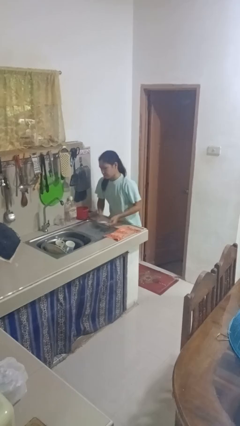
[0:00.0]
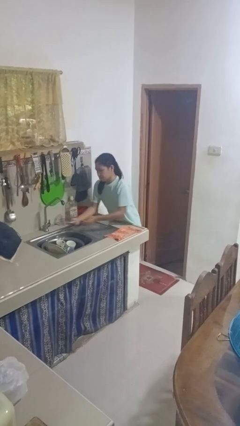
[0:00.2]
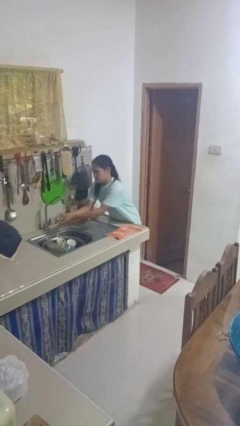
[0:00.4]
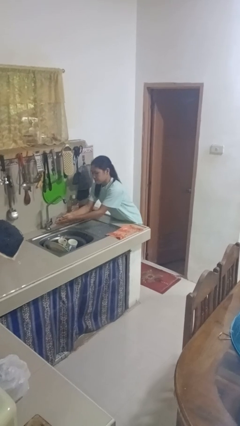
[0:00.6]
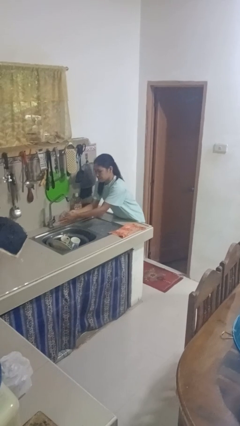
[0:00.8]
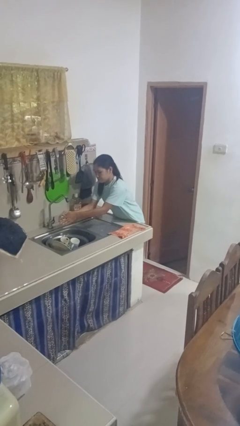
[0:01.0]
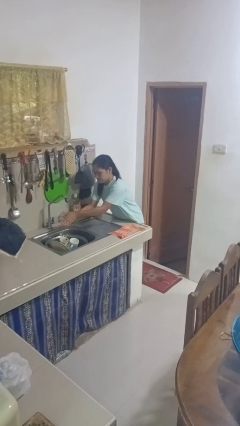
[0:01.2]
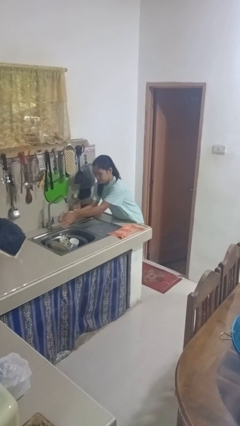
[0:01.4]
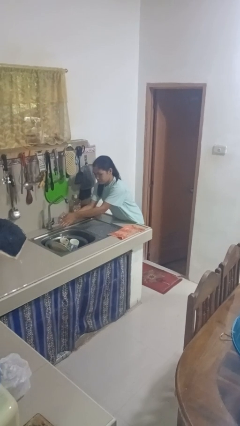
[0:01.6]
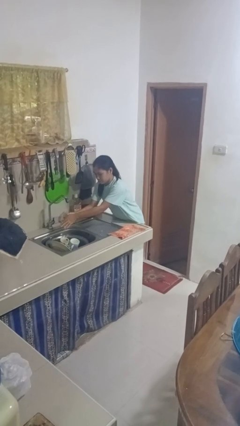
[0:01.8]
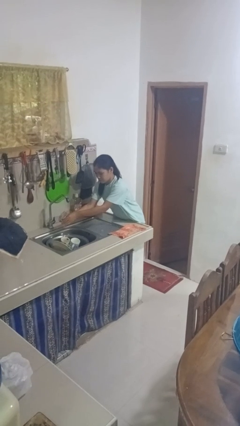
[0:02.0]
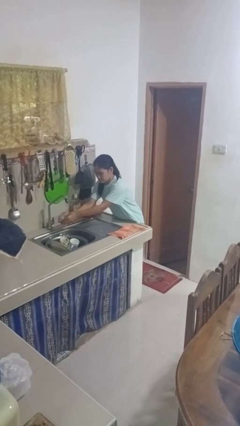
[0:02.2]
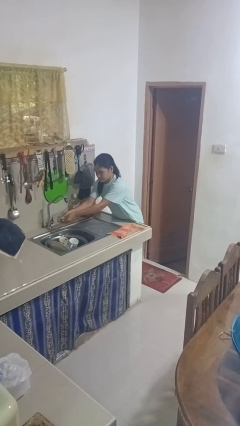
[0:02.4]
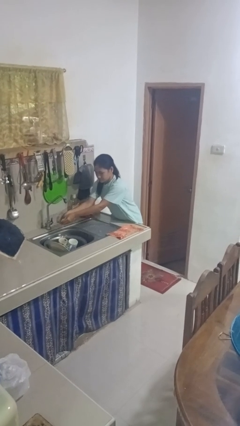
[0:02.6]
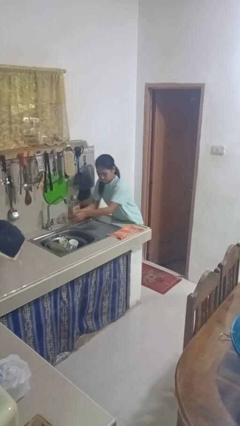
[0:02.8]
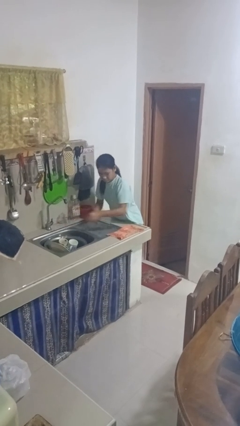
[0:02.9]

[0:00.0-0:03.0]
person washes hands

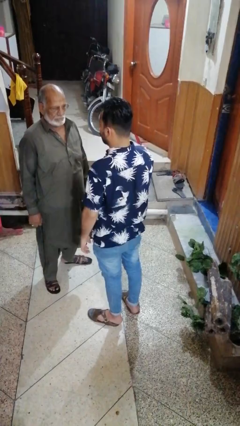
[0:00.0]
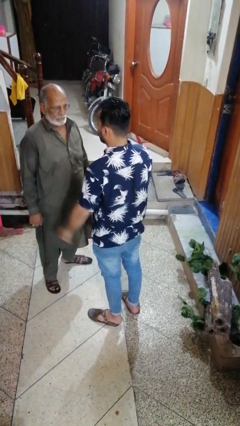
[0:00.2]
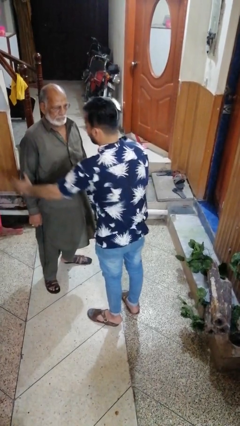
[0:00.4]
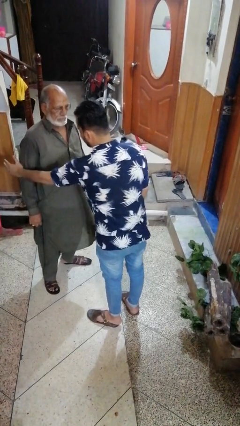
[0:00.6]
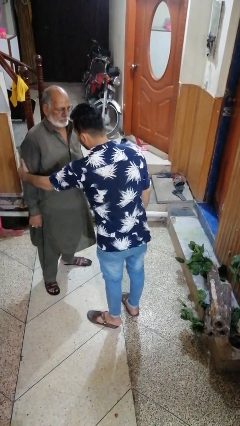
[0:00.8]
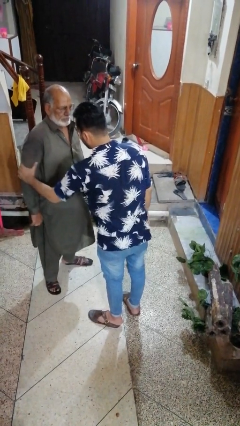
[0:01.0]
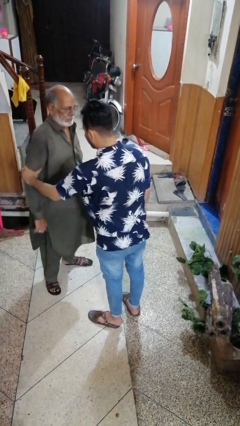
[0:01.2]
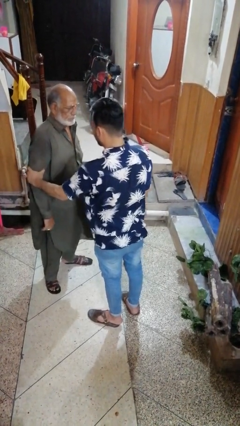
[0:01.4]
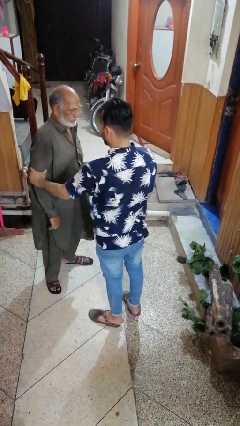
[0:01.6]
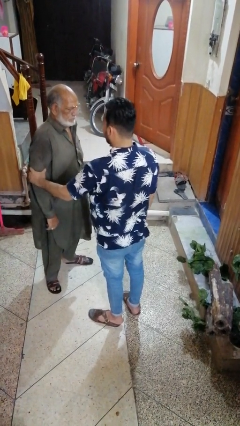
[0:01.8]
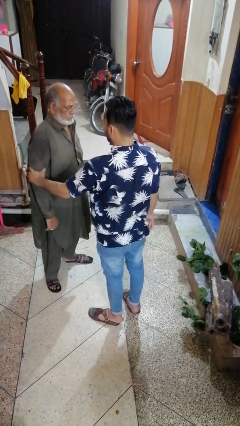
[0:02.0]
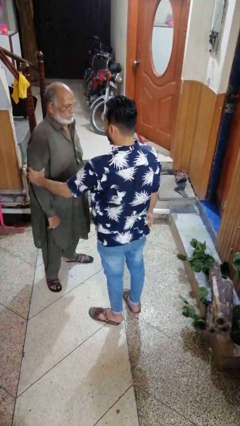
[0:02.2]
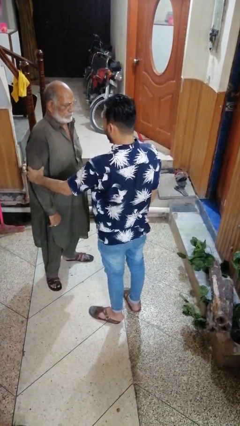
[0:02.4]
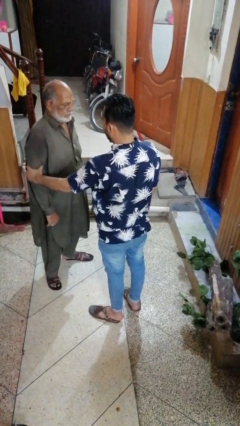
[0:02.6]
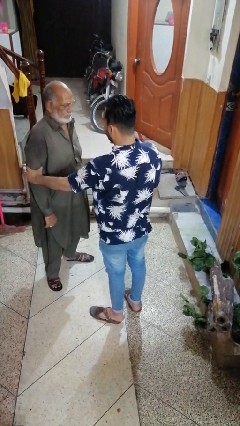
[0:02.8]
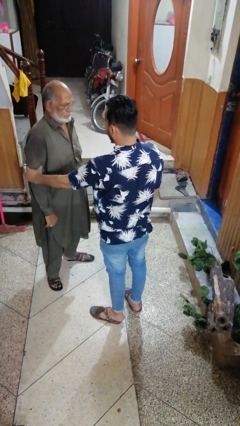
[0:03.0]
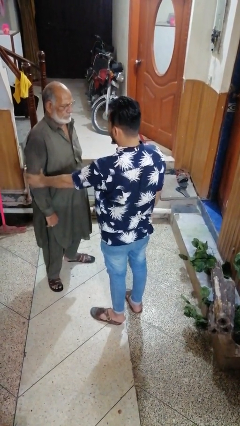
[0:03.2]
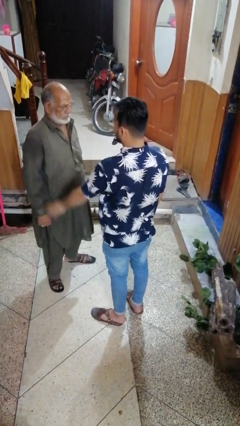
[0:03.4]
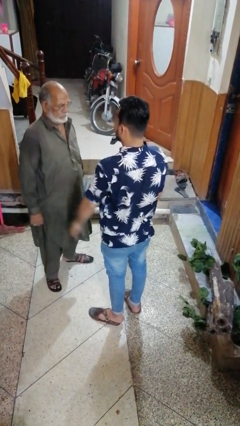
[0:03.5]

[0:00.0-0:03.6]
person grabs person by forearm

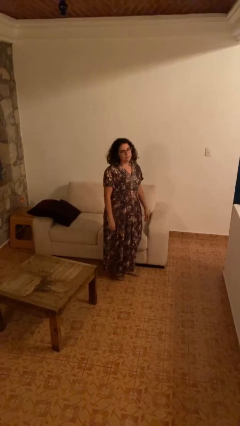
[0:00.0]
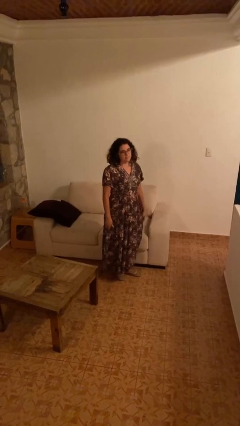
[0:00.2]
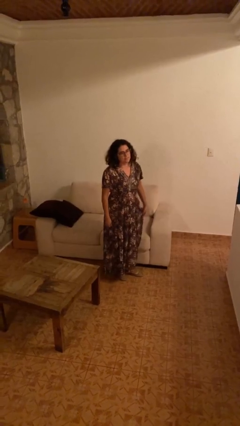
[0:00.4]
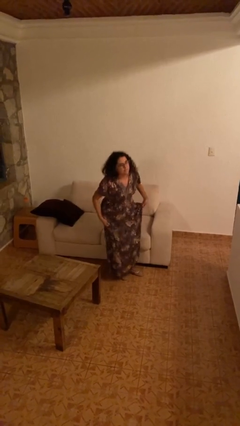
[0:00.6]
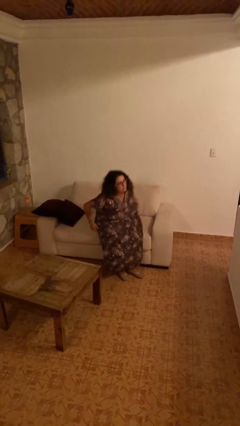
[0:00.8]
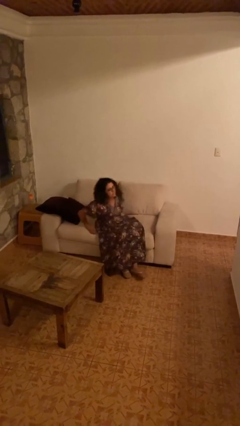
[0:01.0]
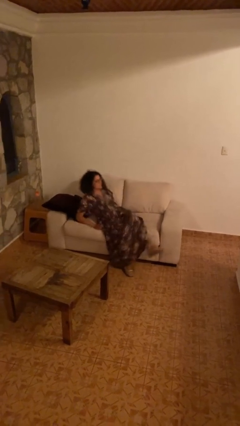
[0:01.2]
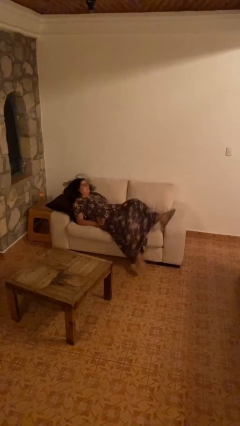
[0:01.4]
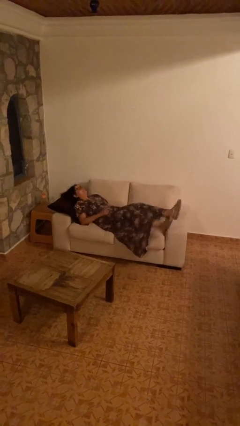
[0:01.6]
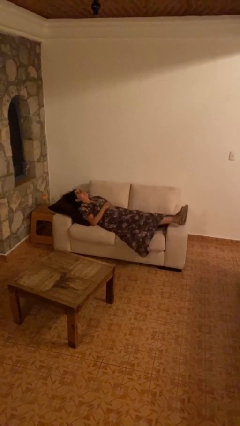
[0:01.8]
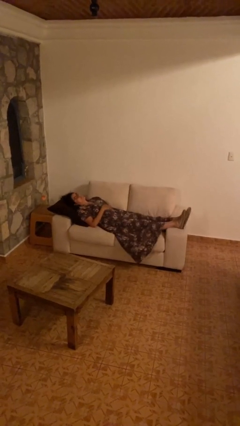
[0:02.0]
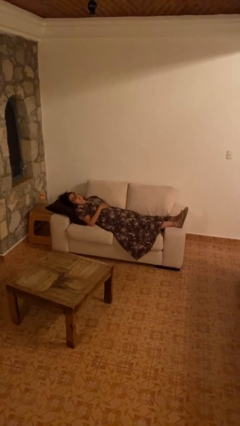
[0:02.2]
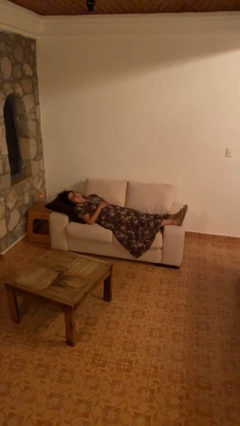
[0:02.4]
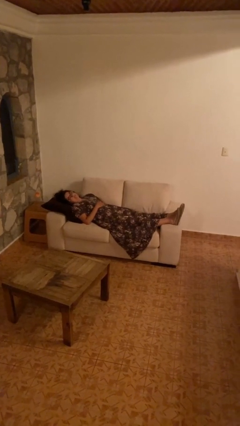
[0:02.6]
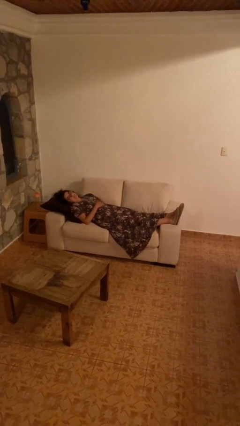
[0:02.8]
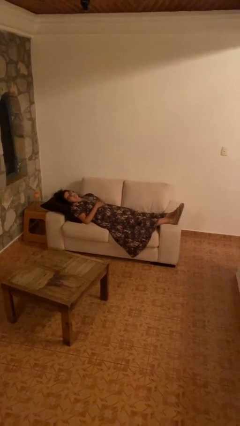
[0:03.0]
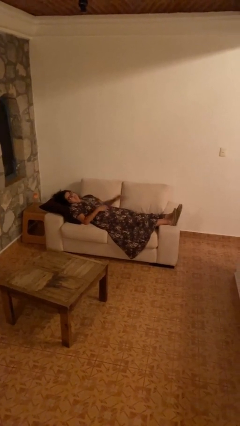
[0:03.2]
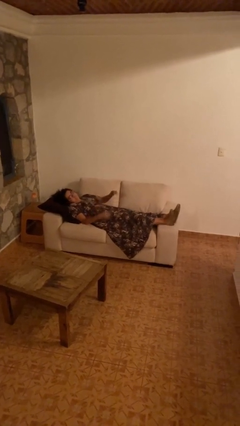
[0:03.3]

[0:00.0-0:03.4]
person lies down on couch

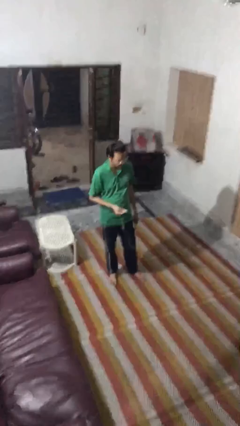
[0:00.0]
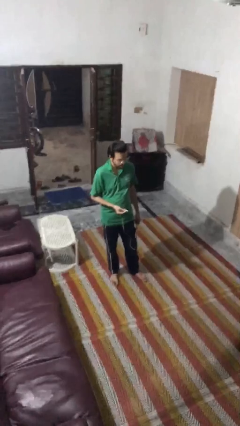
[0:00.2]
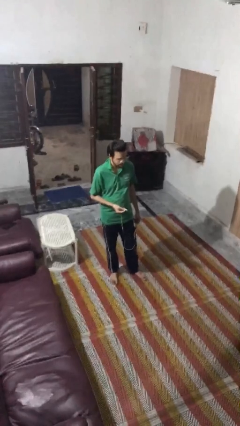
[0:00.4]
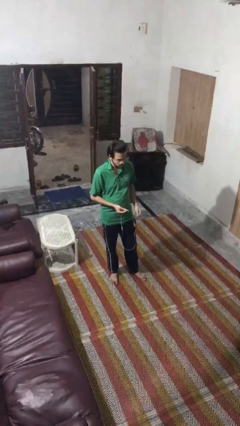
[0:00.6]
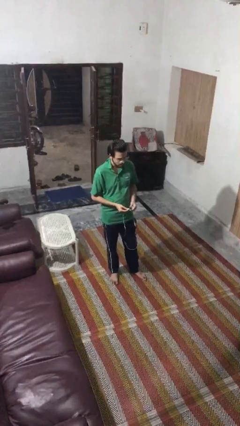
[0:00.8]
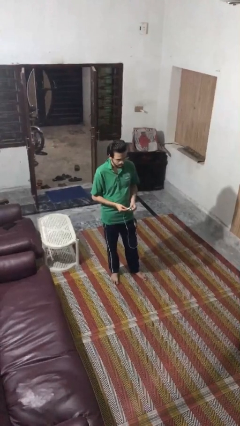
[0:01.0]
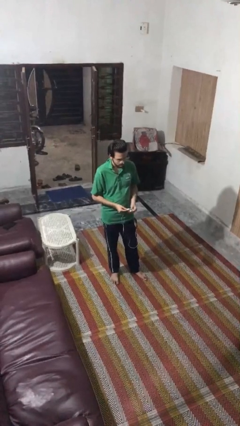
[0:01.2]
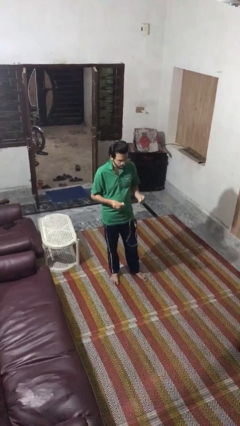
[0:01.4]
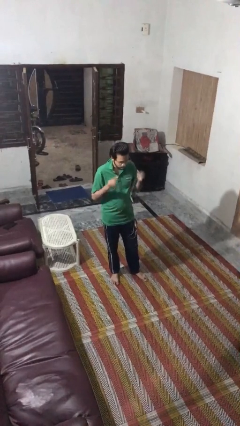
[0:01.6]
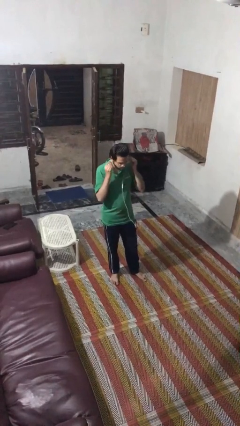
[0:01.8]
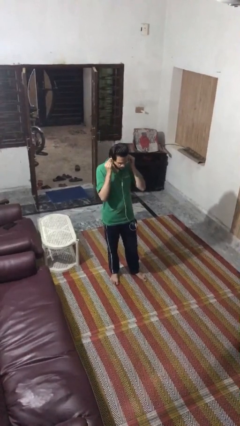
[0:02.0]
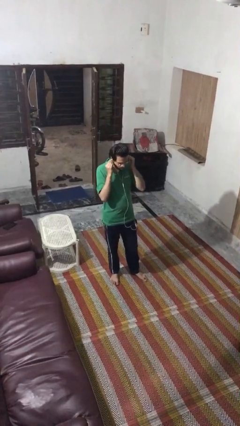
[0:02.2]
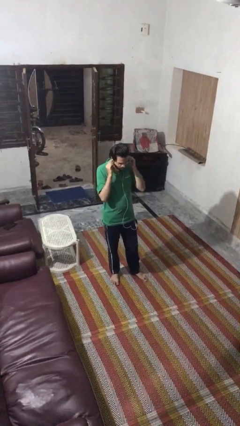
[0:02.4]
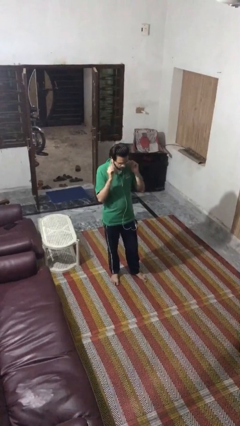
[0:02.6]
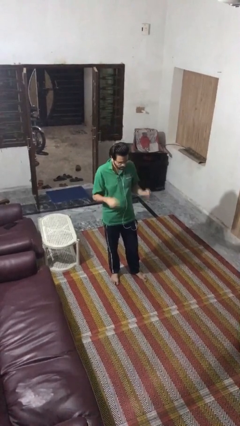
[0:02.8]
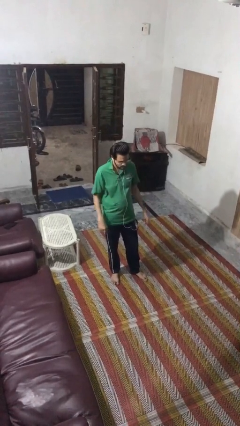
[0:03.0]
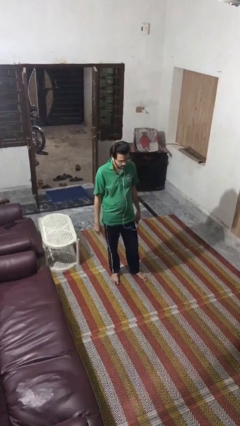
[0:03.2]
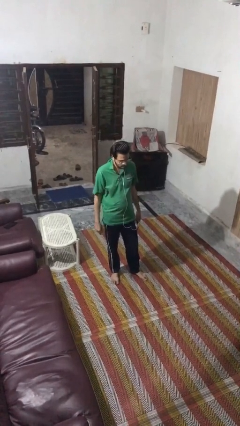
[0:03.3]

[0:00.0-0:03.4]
person puts on headphones

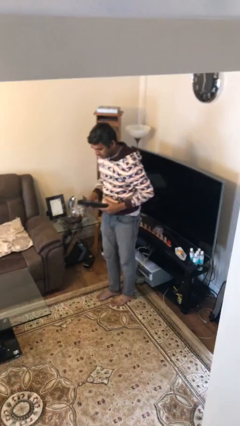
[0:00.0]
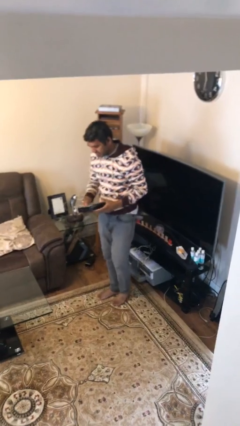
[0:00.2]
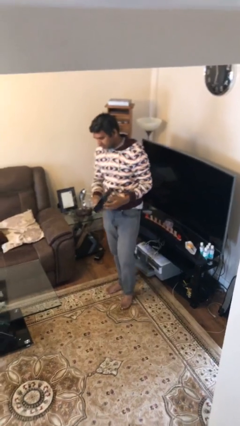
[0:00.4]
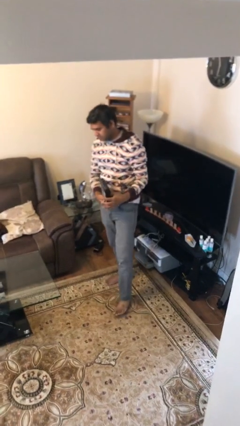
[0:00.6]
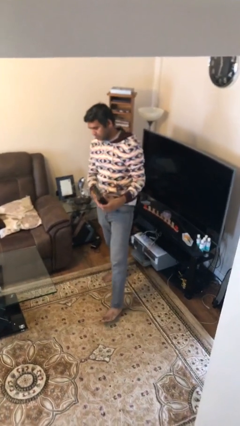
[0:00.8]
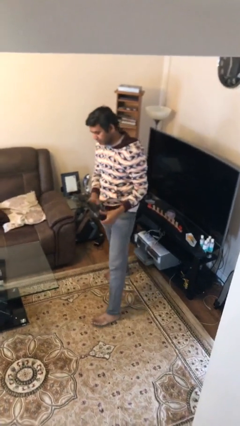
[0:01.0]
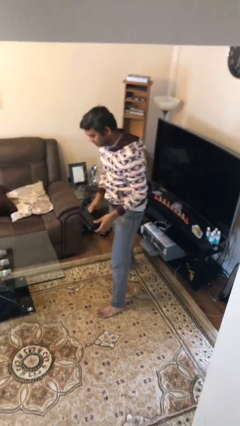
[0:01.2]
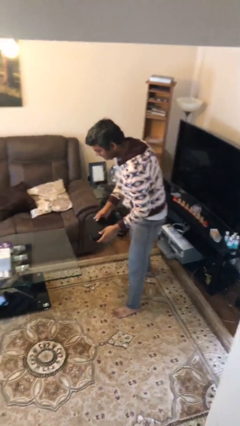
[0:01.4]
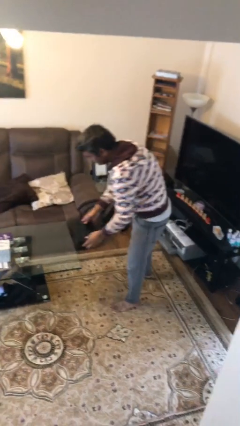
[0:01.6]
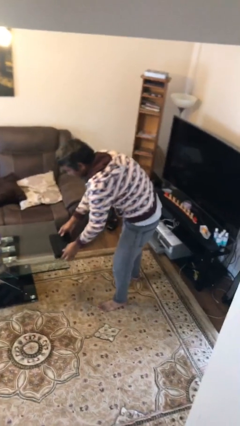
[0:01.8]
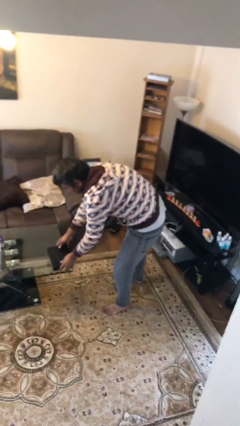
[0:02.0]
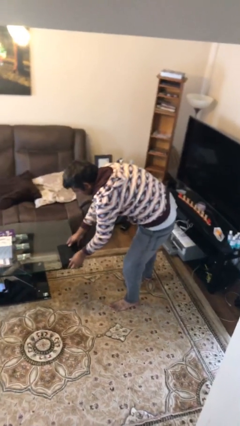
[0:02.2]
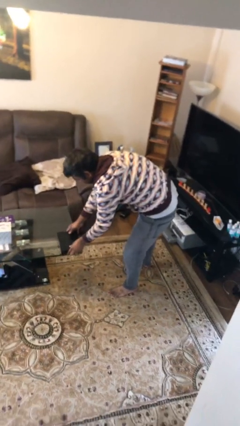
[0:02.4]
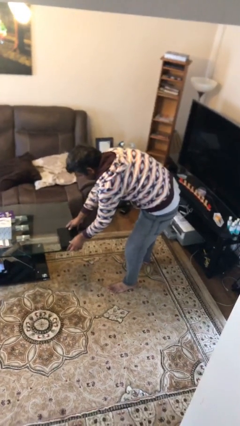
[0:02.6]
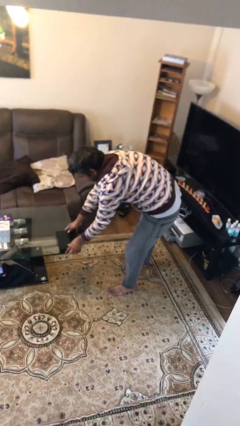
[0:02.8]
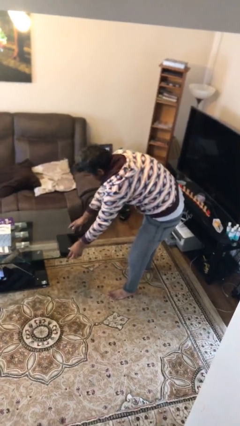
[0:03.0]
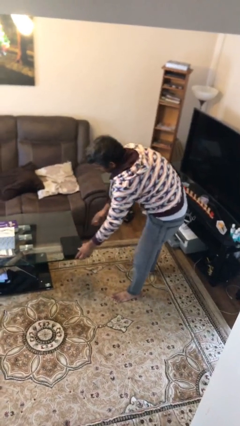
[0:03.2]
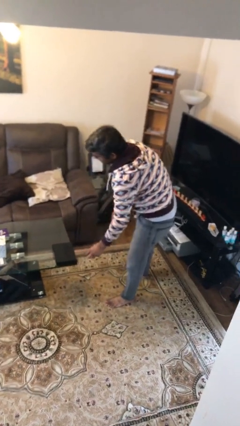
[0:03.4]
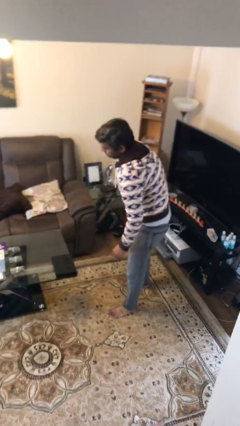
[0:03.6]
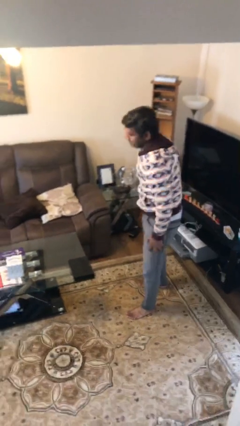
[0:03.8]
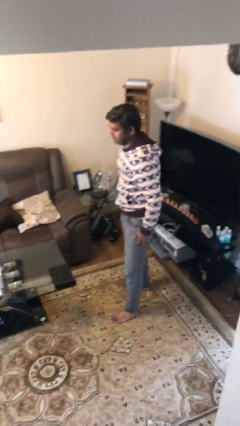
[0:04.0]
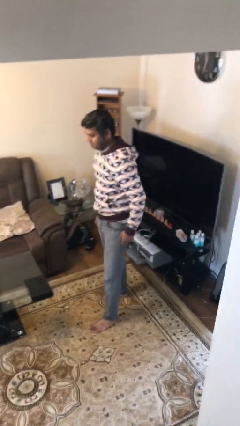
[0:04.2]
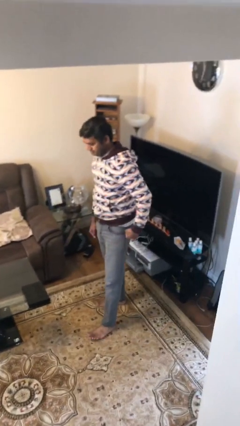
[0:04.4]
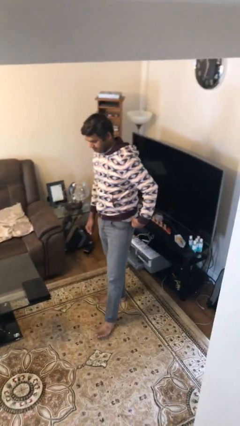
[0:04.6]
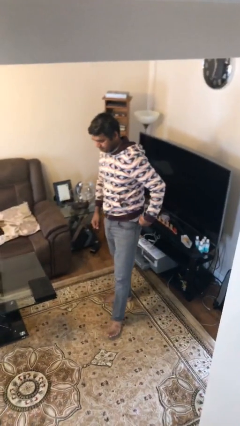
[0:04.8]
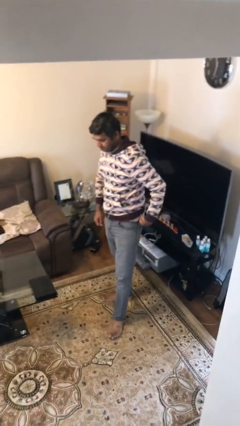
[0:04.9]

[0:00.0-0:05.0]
person puts down object on table
